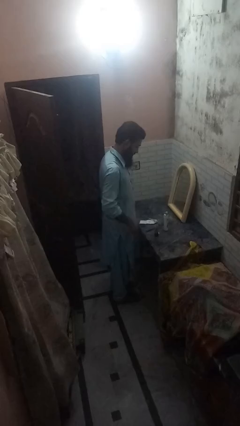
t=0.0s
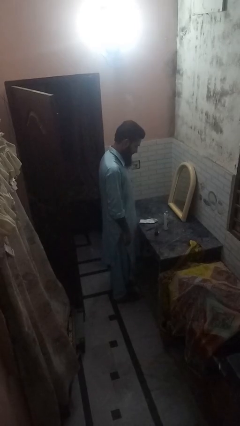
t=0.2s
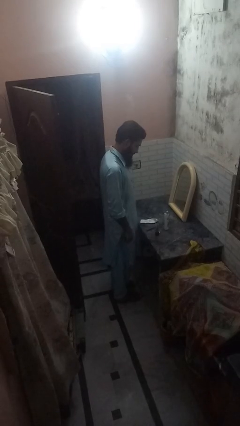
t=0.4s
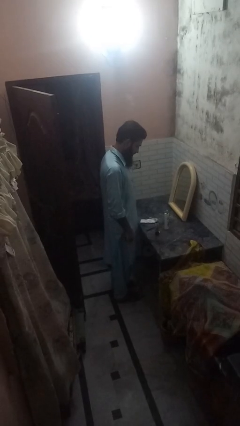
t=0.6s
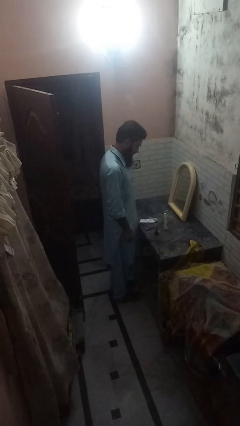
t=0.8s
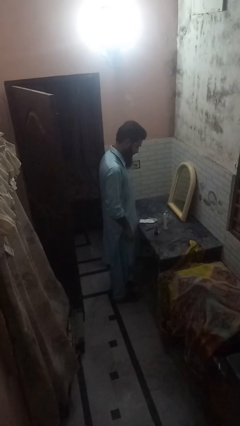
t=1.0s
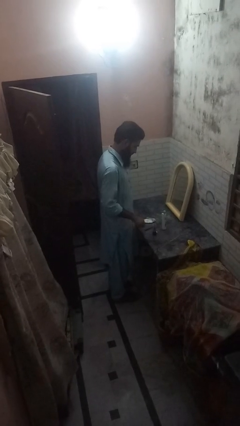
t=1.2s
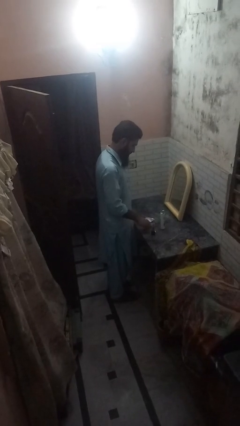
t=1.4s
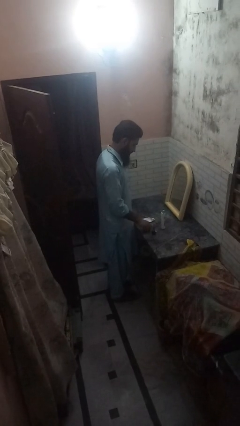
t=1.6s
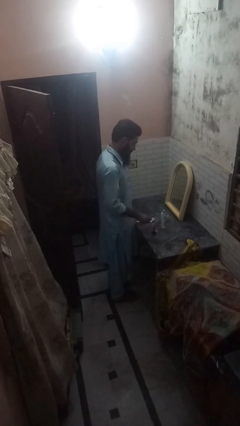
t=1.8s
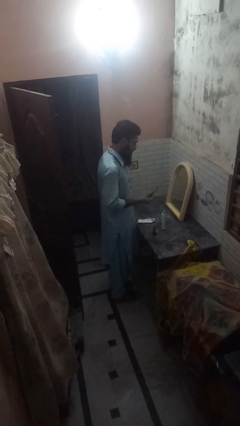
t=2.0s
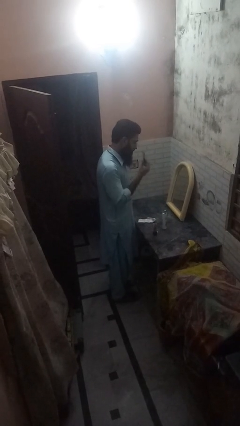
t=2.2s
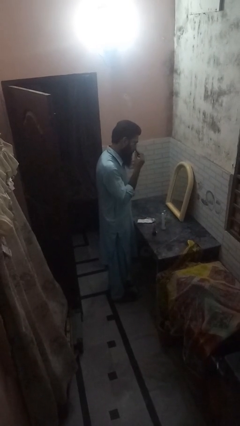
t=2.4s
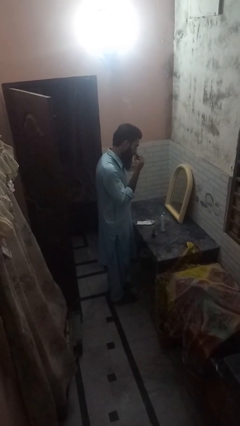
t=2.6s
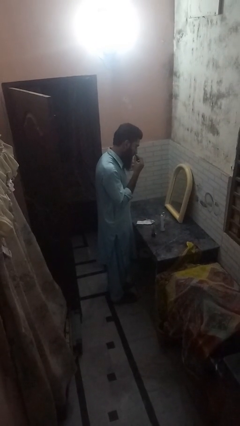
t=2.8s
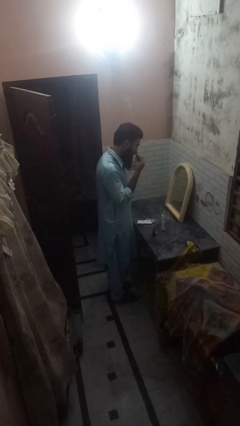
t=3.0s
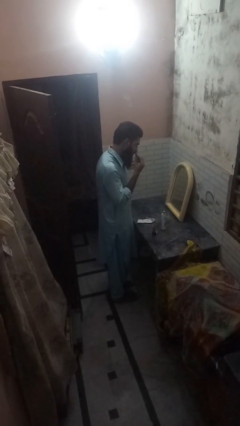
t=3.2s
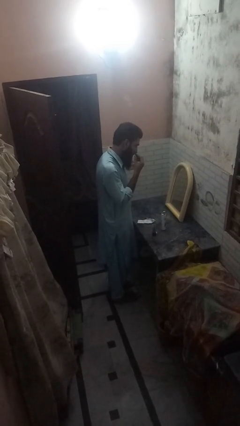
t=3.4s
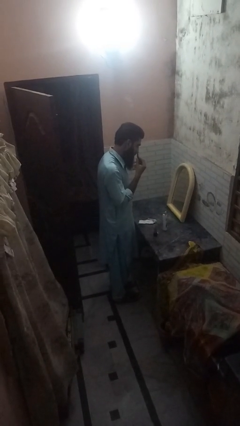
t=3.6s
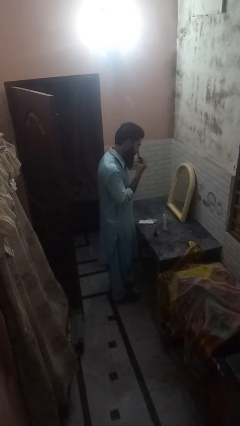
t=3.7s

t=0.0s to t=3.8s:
person shaves face

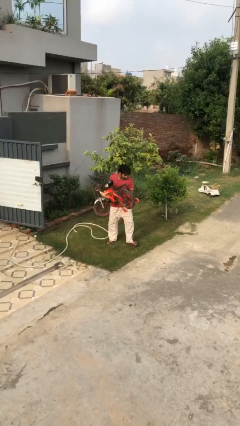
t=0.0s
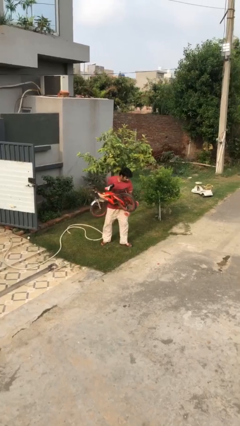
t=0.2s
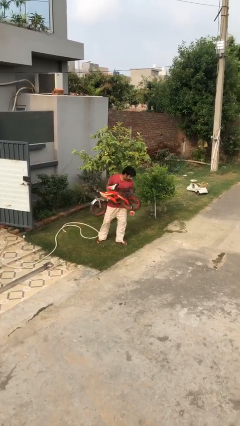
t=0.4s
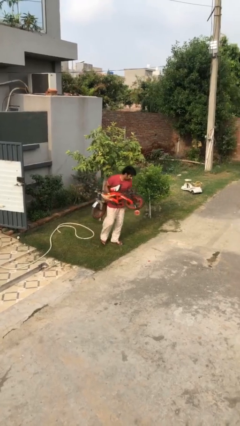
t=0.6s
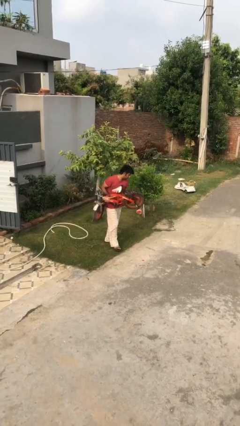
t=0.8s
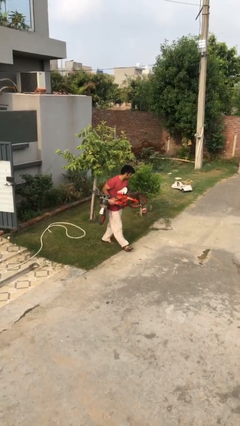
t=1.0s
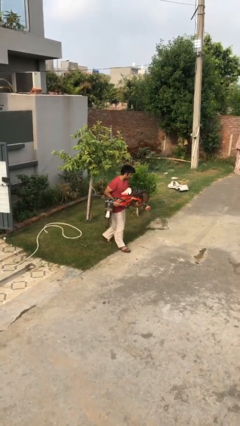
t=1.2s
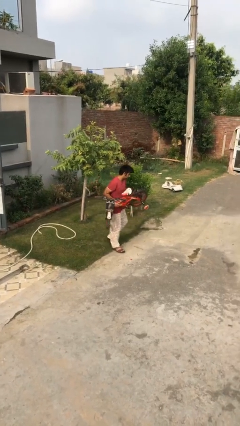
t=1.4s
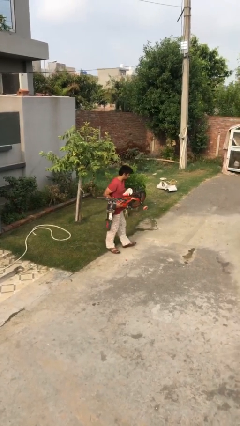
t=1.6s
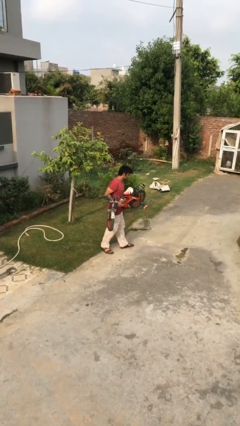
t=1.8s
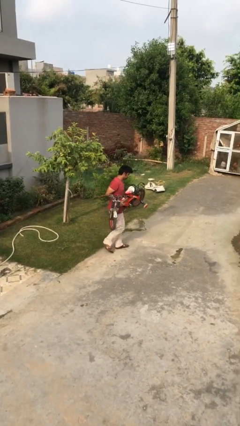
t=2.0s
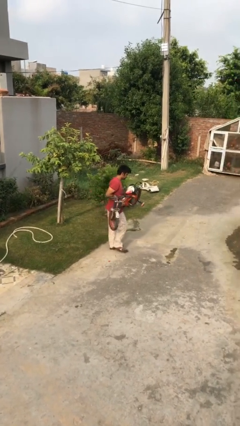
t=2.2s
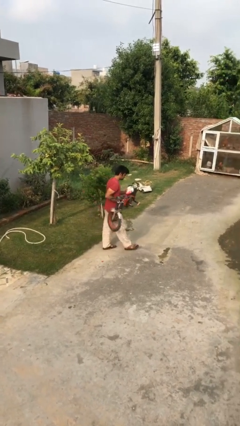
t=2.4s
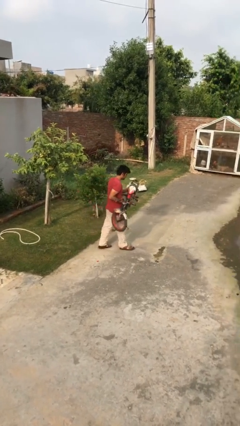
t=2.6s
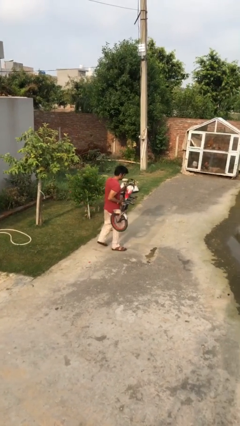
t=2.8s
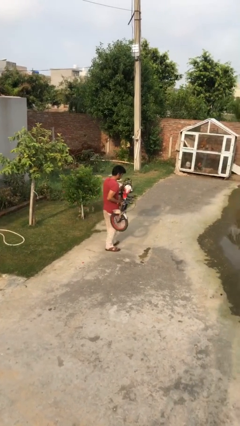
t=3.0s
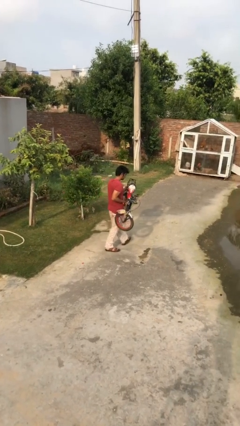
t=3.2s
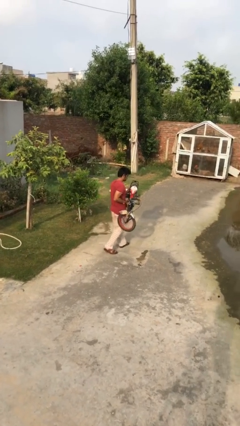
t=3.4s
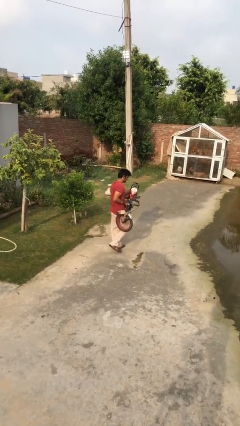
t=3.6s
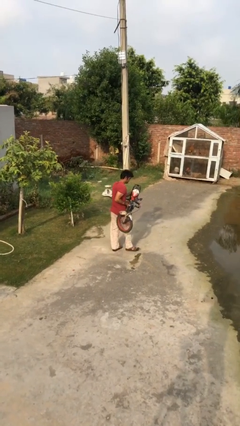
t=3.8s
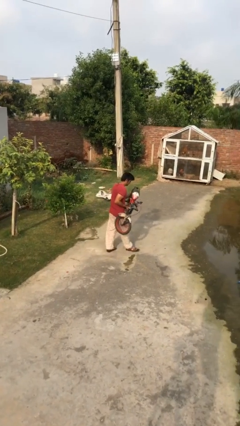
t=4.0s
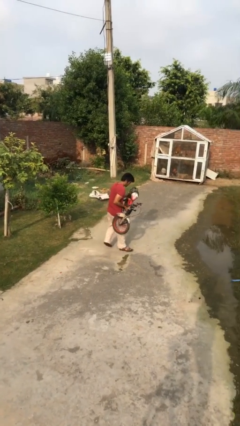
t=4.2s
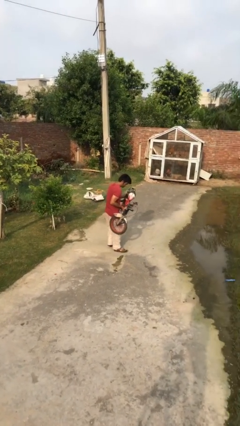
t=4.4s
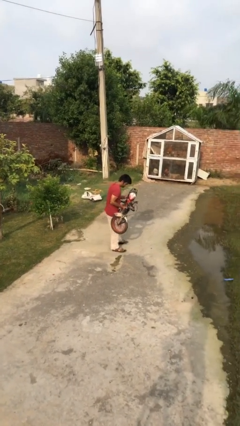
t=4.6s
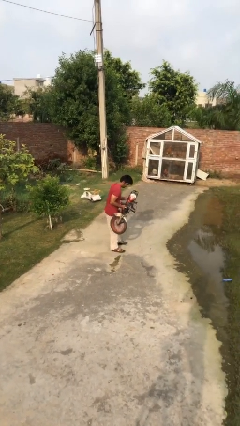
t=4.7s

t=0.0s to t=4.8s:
person carries heavy object

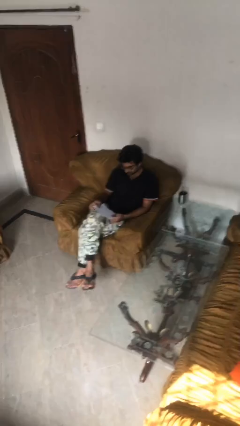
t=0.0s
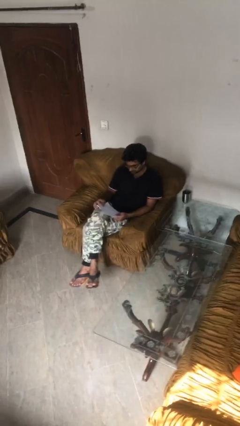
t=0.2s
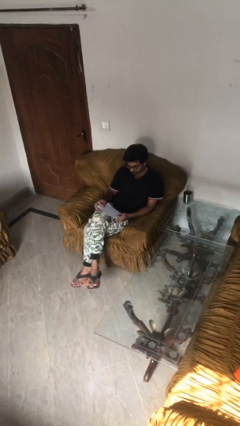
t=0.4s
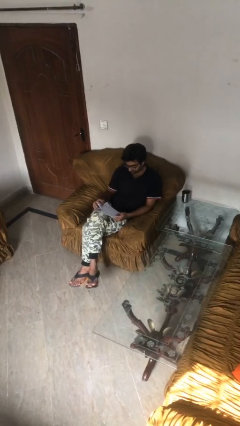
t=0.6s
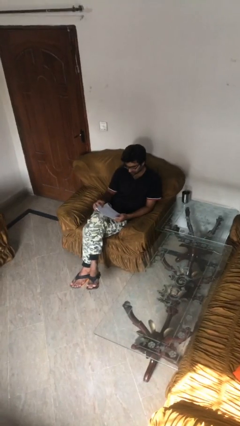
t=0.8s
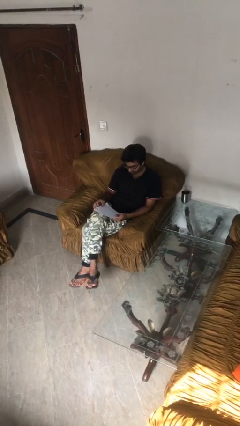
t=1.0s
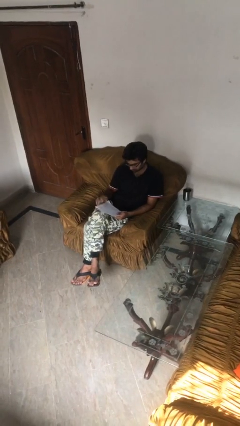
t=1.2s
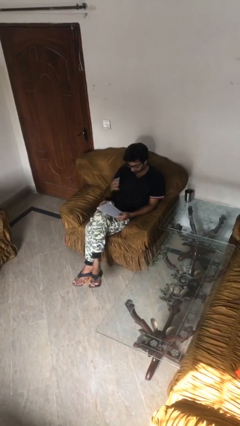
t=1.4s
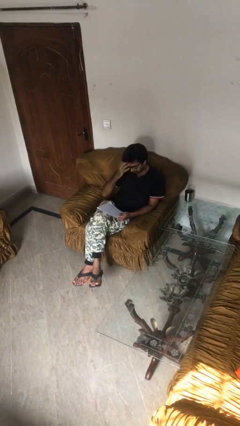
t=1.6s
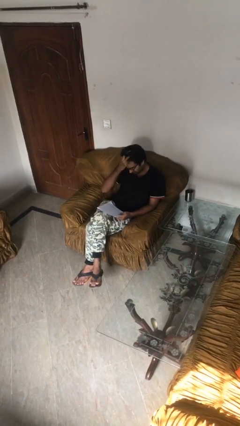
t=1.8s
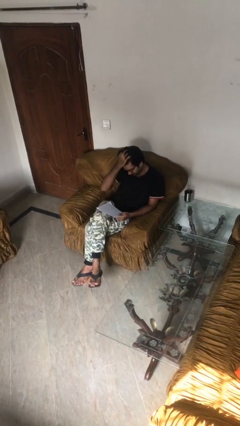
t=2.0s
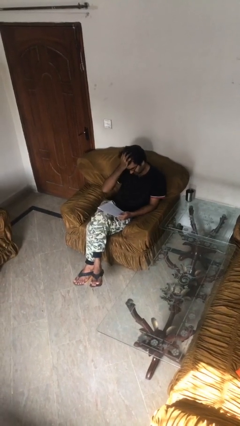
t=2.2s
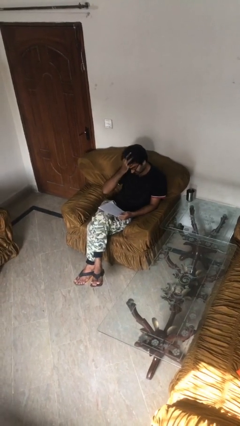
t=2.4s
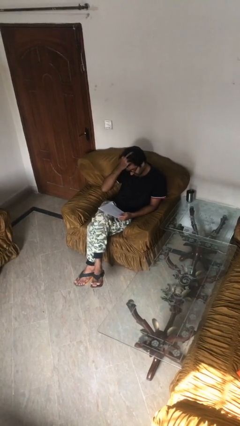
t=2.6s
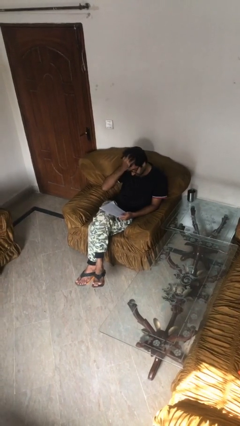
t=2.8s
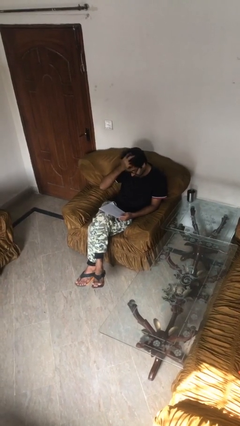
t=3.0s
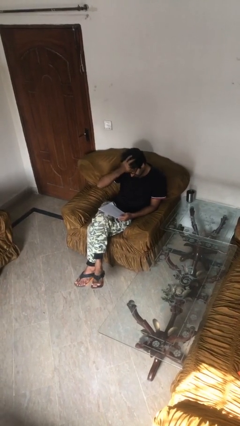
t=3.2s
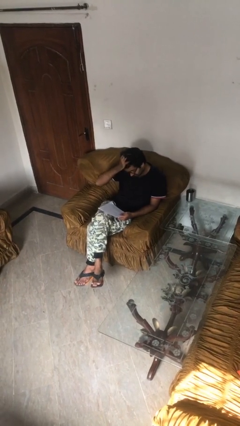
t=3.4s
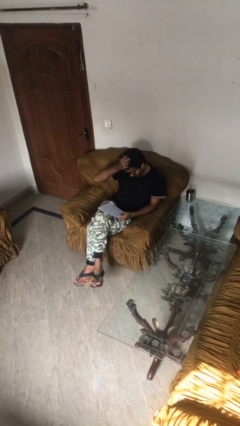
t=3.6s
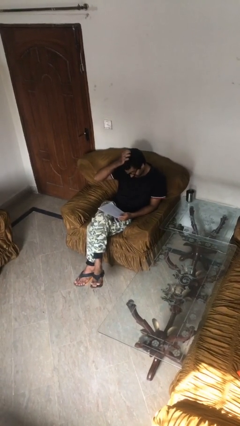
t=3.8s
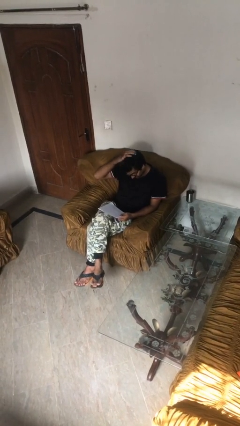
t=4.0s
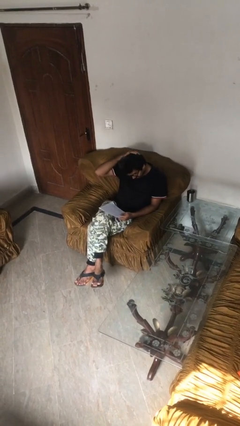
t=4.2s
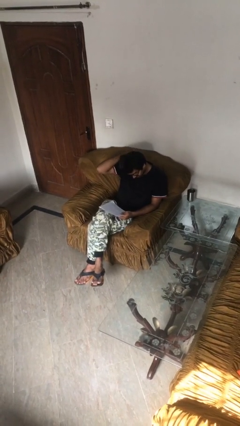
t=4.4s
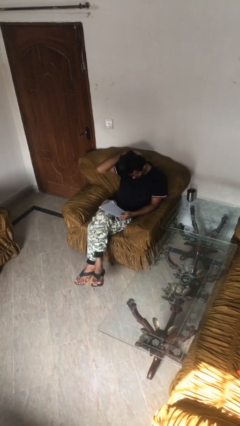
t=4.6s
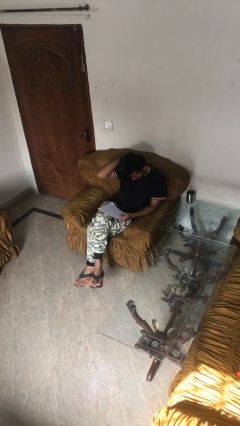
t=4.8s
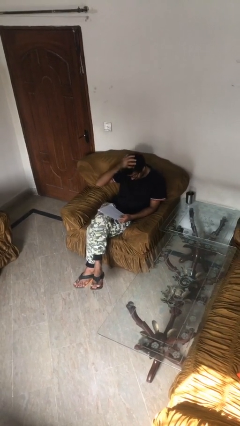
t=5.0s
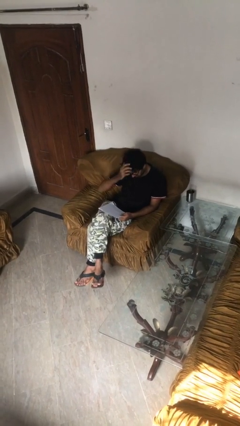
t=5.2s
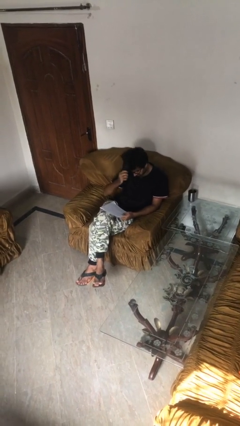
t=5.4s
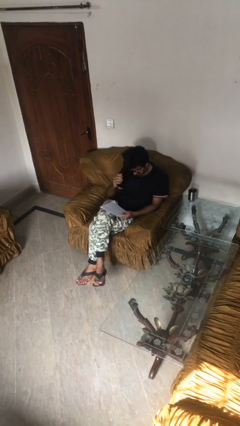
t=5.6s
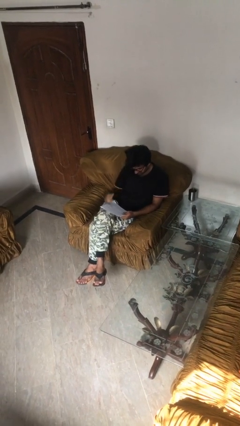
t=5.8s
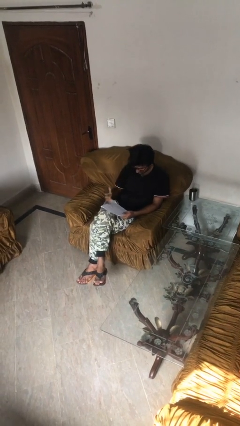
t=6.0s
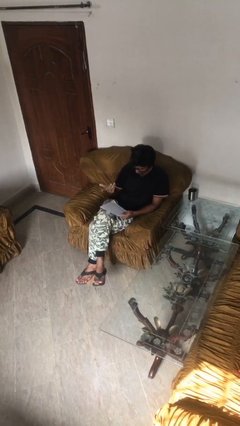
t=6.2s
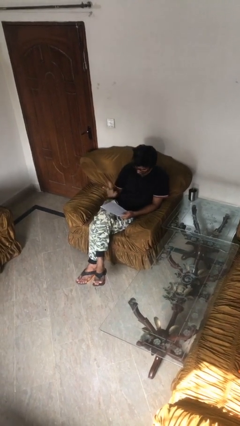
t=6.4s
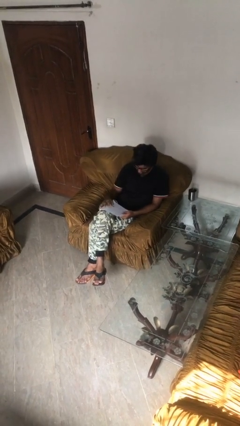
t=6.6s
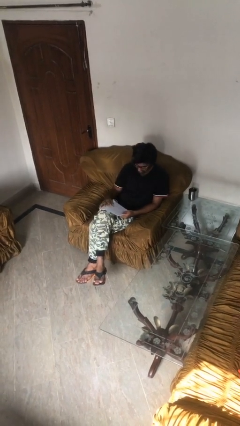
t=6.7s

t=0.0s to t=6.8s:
person reads document

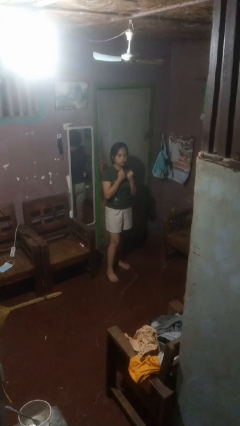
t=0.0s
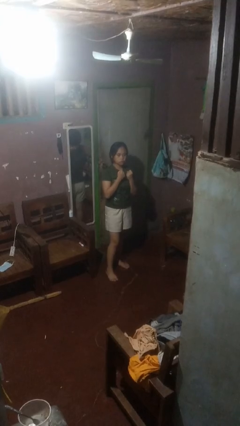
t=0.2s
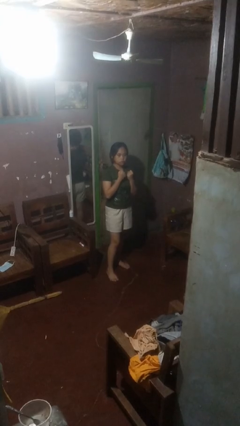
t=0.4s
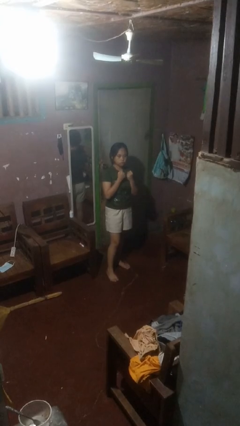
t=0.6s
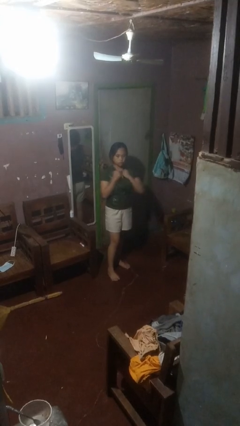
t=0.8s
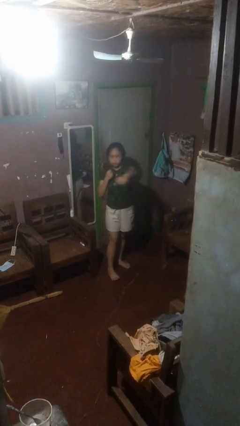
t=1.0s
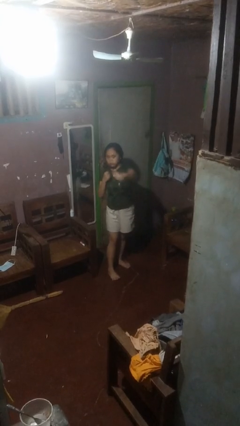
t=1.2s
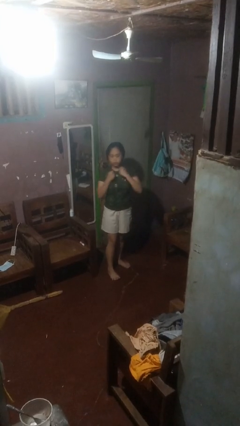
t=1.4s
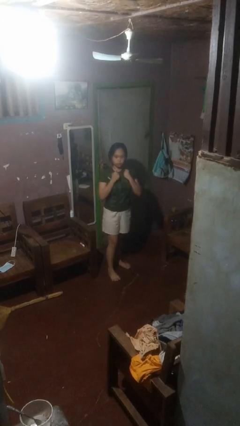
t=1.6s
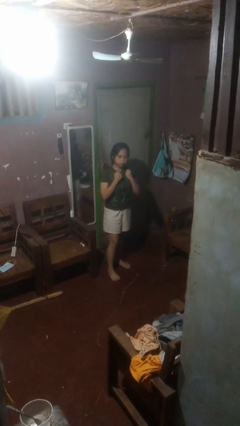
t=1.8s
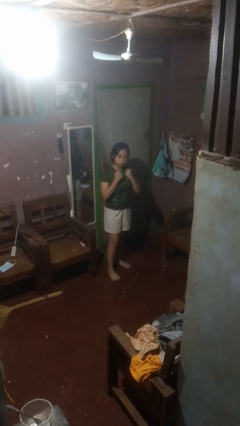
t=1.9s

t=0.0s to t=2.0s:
person punches

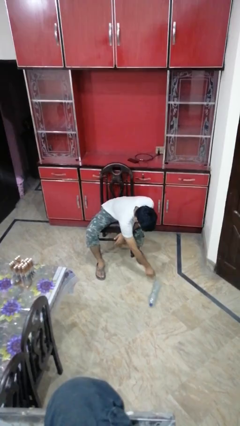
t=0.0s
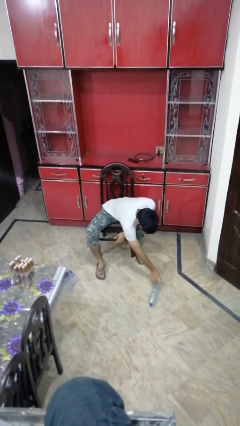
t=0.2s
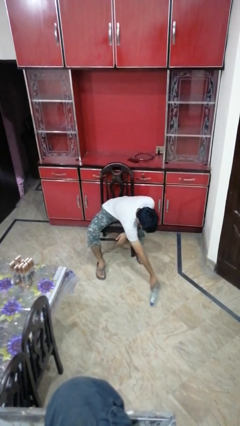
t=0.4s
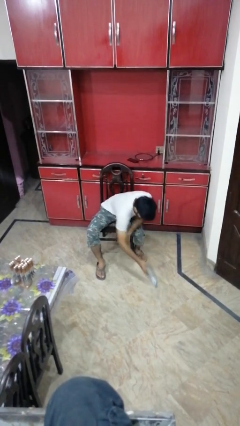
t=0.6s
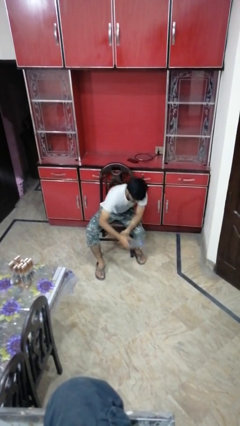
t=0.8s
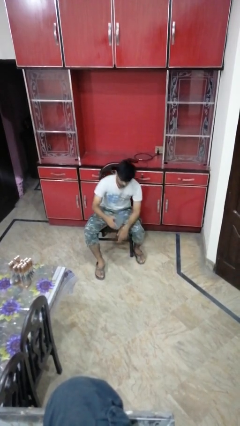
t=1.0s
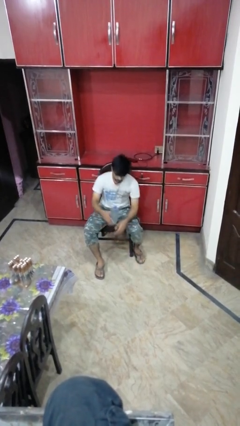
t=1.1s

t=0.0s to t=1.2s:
person picks up object from floor
